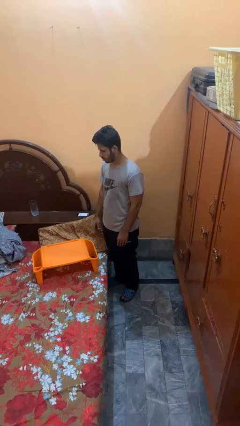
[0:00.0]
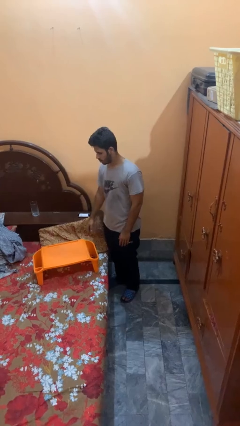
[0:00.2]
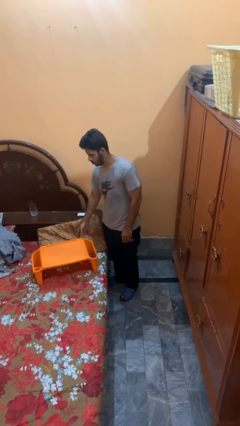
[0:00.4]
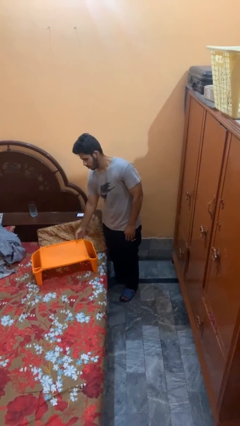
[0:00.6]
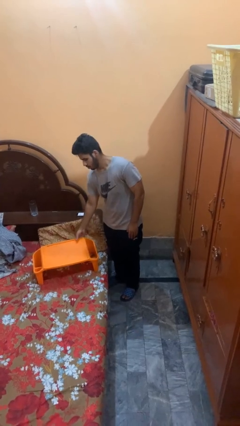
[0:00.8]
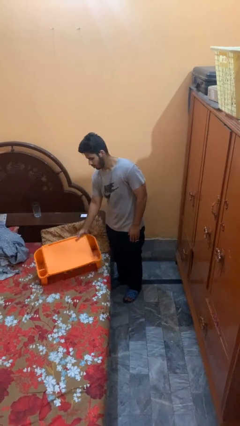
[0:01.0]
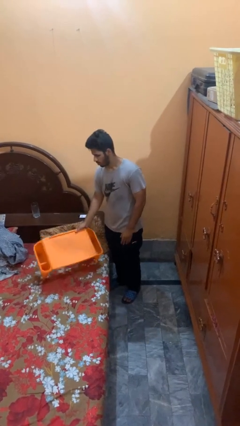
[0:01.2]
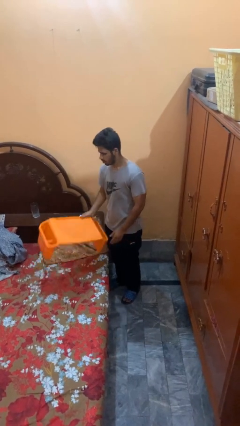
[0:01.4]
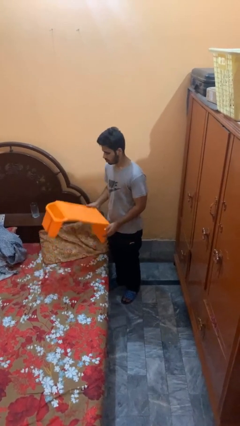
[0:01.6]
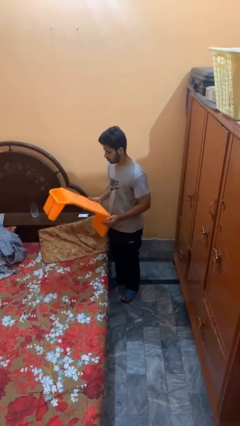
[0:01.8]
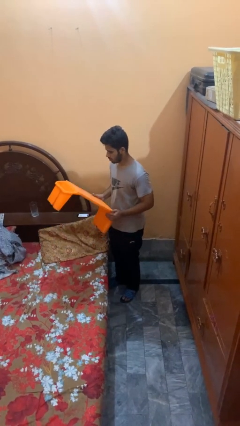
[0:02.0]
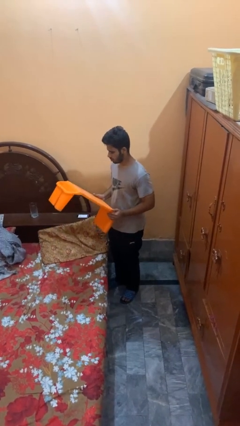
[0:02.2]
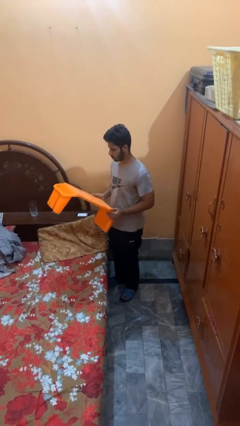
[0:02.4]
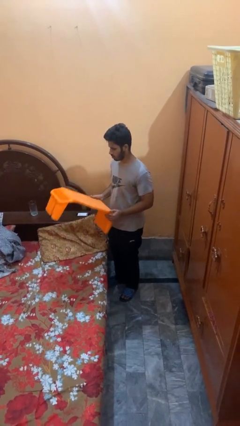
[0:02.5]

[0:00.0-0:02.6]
person picks up object from bed

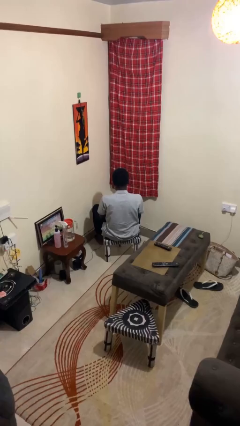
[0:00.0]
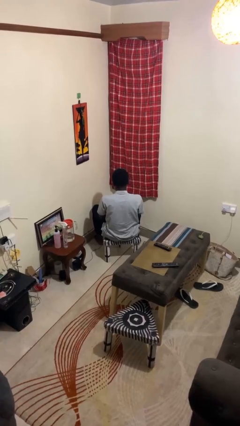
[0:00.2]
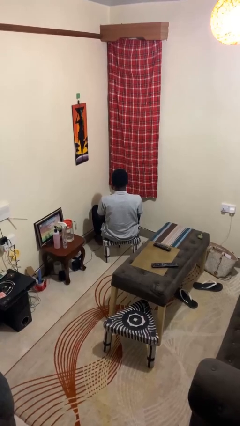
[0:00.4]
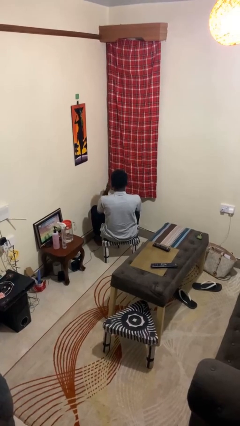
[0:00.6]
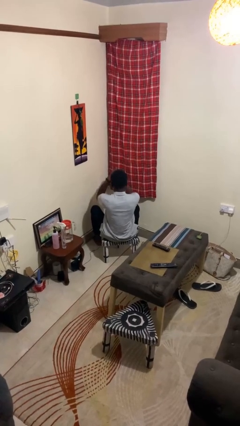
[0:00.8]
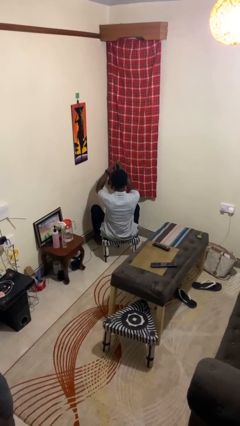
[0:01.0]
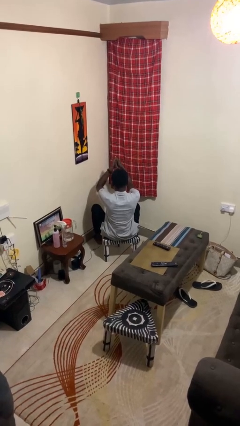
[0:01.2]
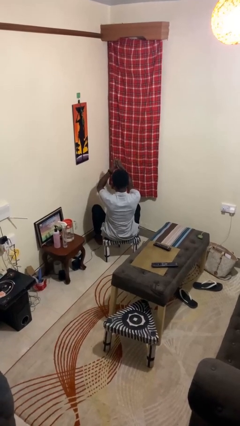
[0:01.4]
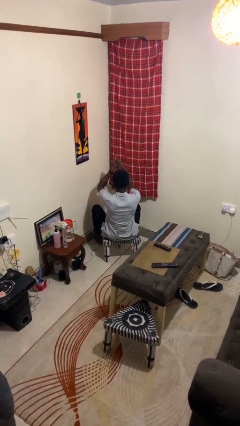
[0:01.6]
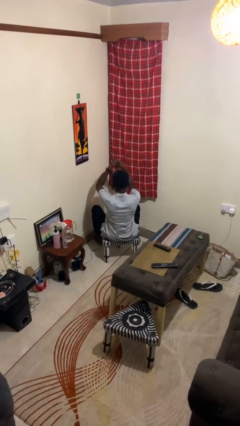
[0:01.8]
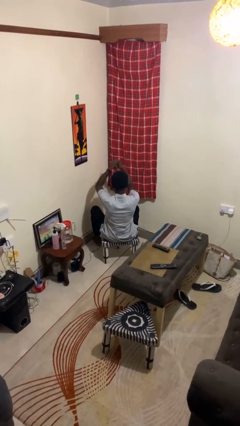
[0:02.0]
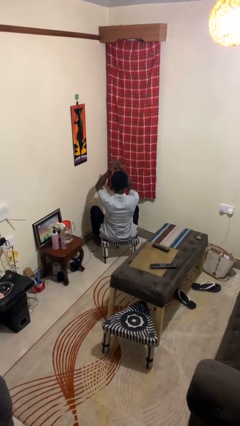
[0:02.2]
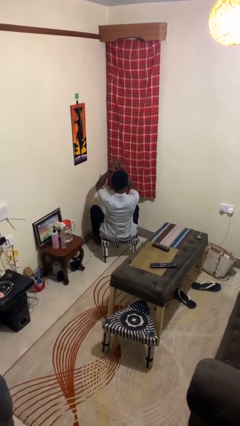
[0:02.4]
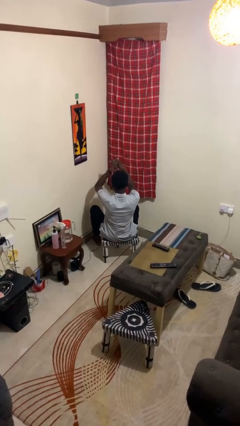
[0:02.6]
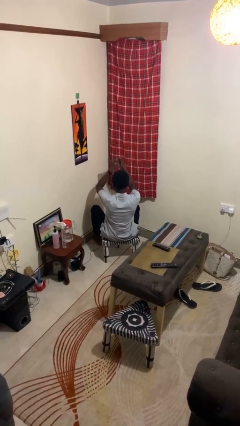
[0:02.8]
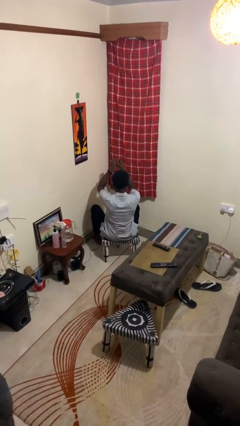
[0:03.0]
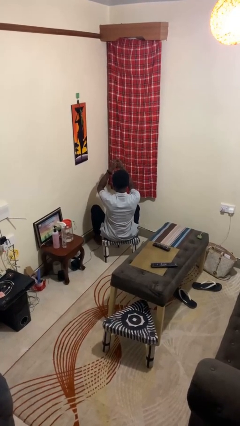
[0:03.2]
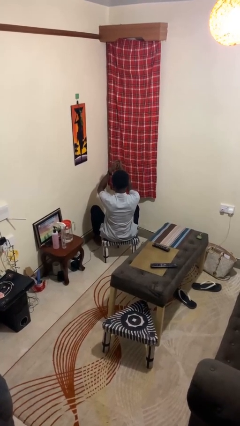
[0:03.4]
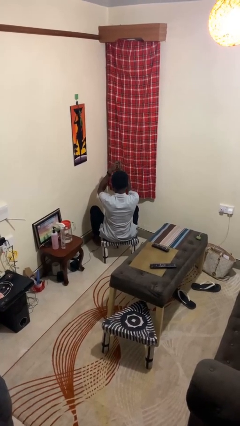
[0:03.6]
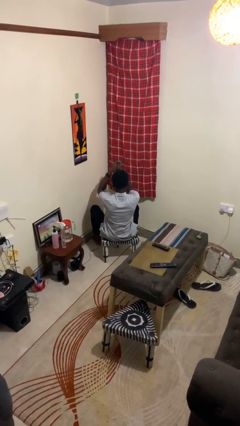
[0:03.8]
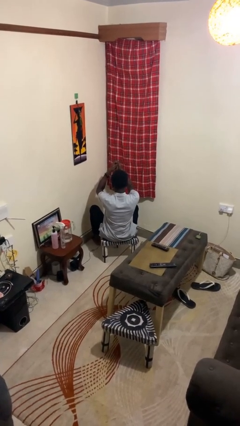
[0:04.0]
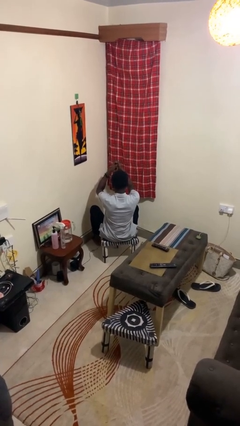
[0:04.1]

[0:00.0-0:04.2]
person cracks knuckles

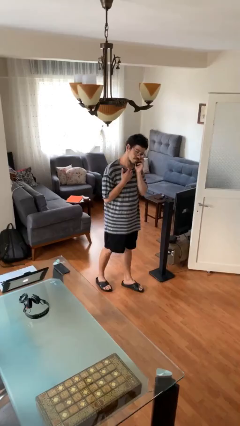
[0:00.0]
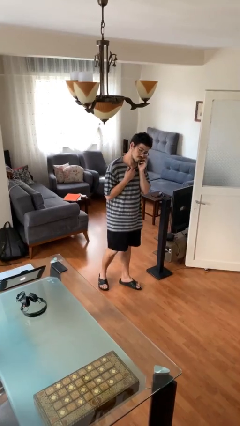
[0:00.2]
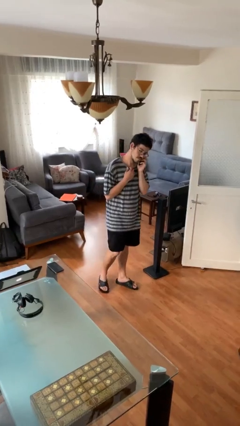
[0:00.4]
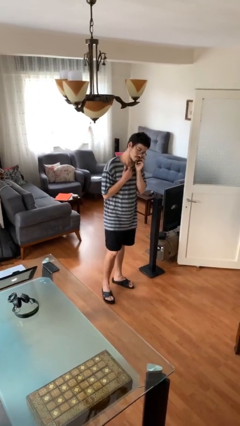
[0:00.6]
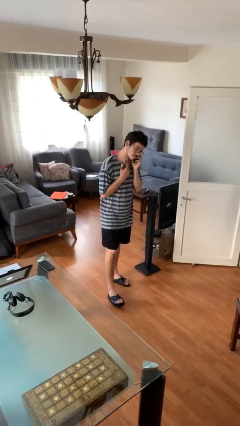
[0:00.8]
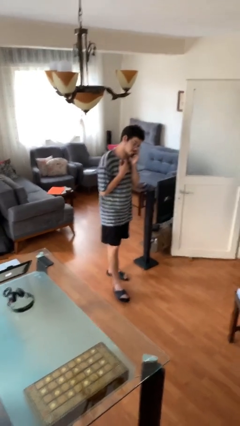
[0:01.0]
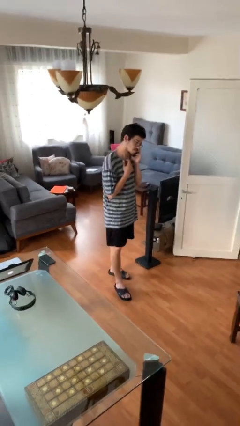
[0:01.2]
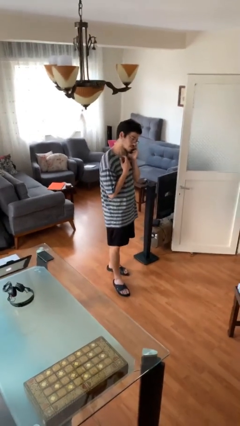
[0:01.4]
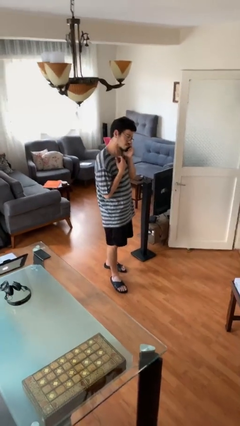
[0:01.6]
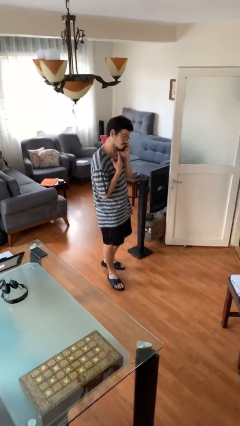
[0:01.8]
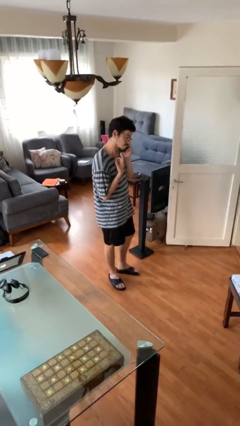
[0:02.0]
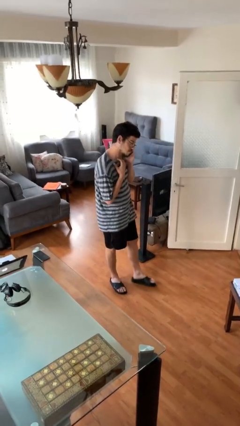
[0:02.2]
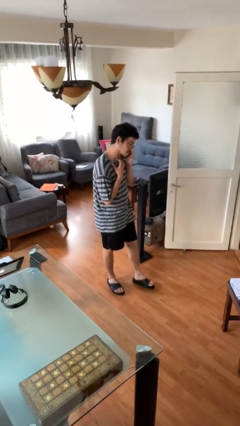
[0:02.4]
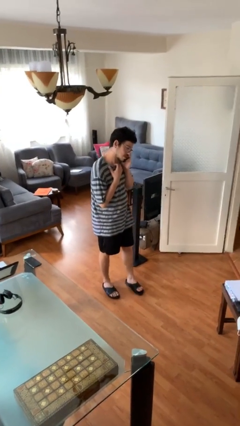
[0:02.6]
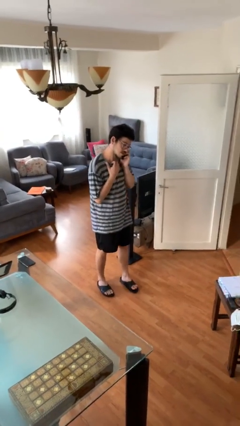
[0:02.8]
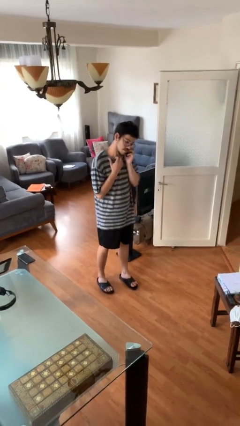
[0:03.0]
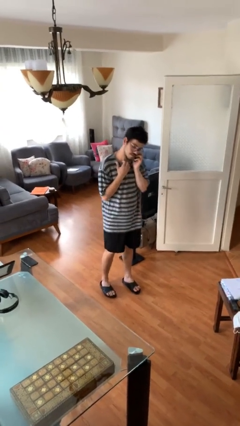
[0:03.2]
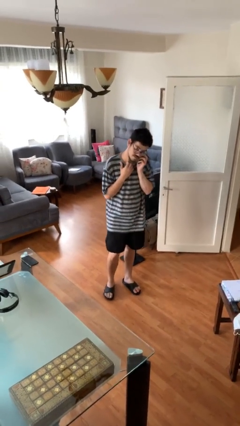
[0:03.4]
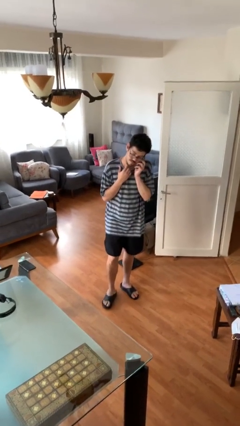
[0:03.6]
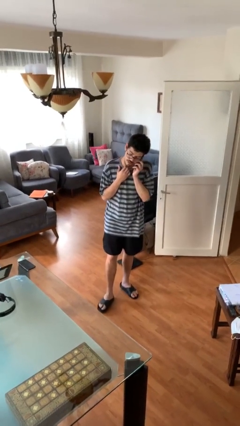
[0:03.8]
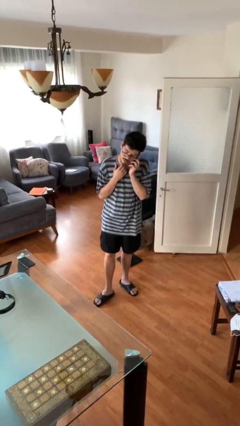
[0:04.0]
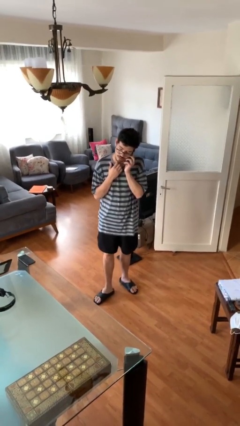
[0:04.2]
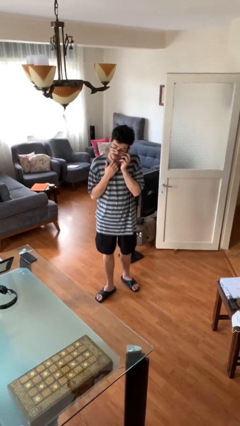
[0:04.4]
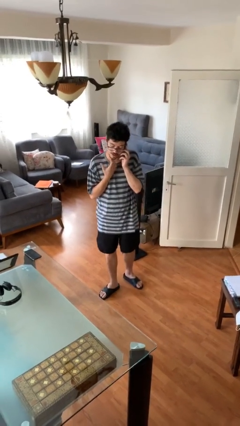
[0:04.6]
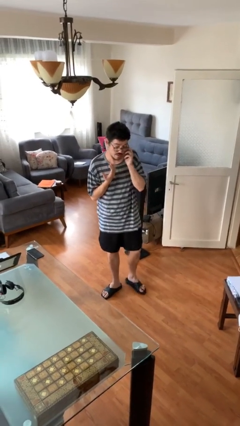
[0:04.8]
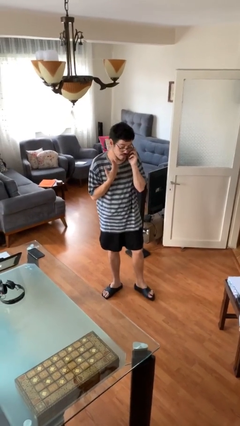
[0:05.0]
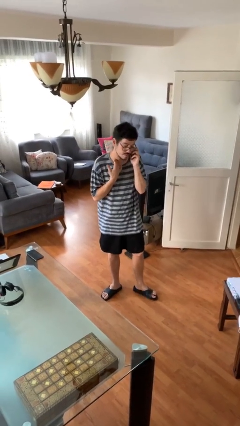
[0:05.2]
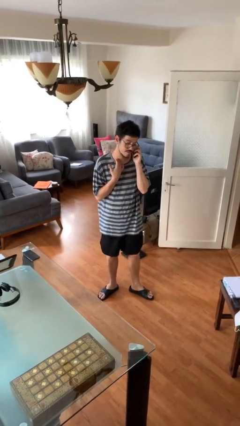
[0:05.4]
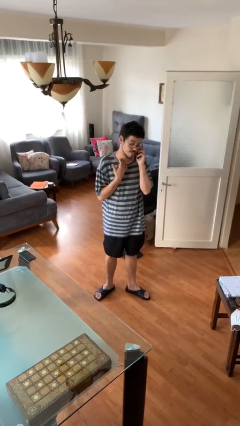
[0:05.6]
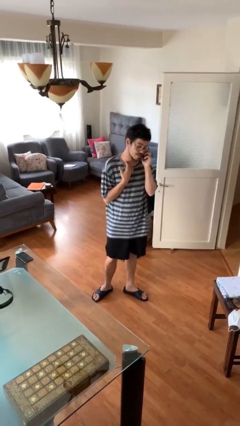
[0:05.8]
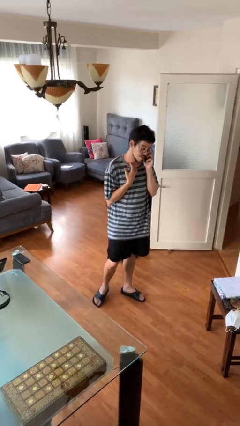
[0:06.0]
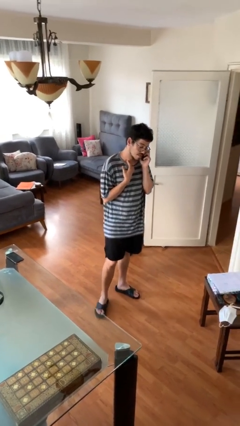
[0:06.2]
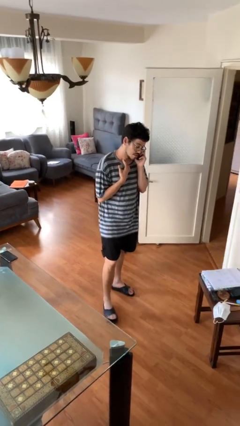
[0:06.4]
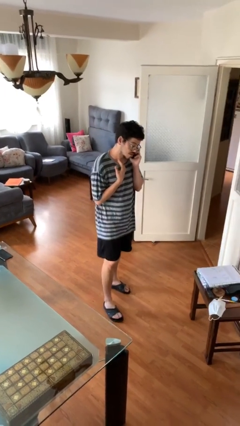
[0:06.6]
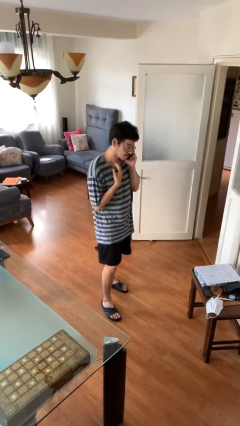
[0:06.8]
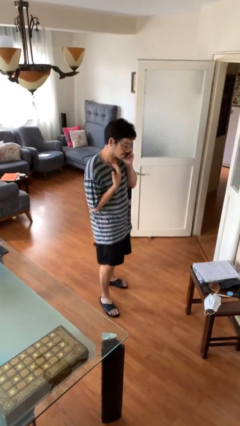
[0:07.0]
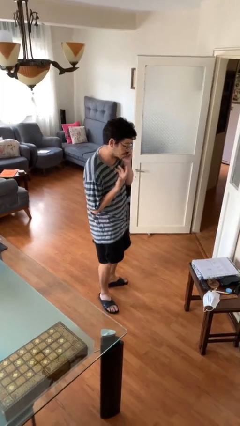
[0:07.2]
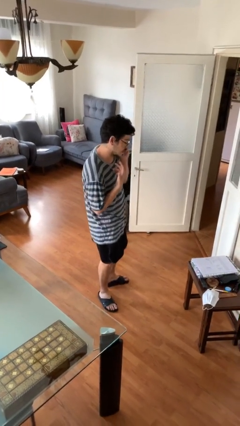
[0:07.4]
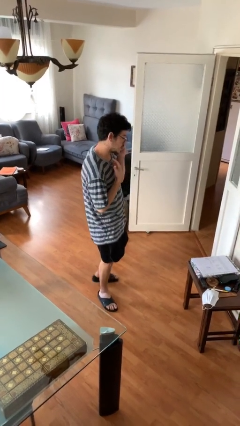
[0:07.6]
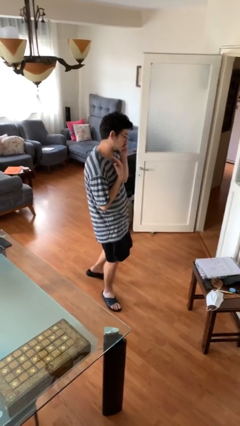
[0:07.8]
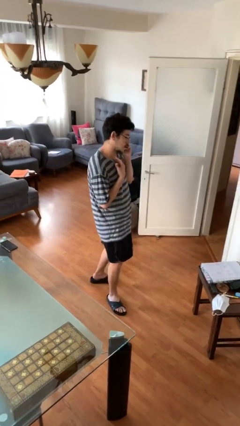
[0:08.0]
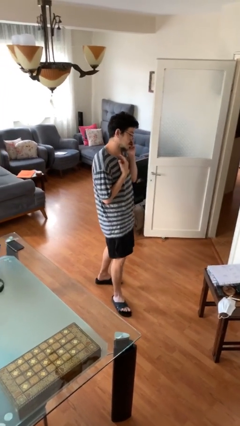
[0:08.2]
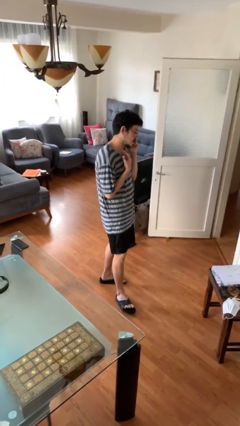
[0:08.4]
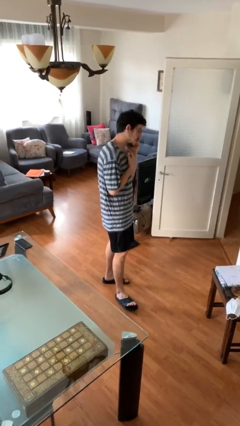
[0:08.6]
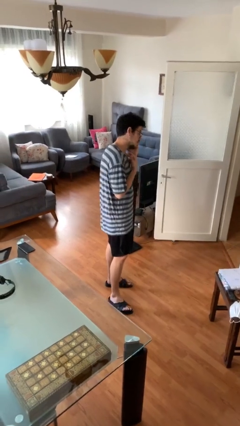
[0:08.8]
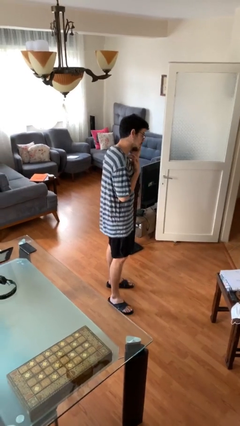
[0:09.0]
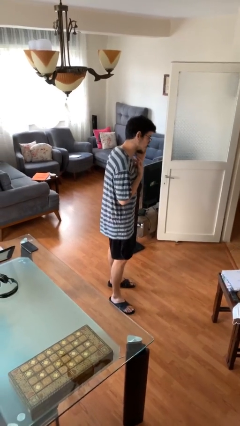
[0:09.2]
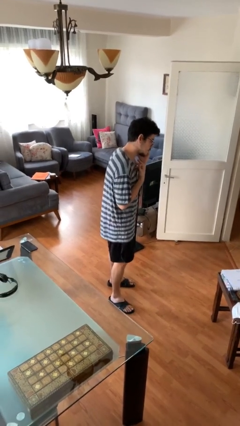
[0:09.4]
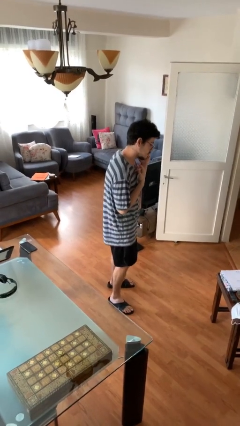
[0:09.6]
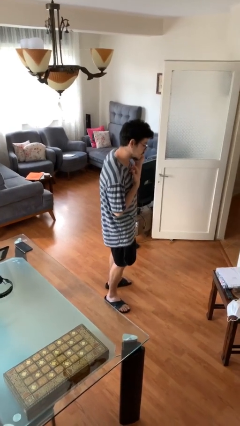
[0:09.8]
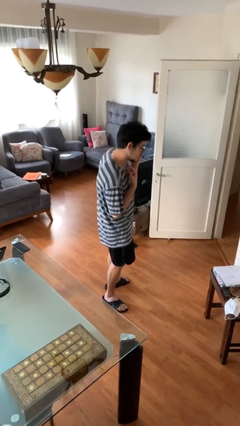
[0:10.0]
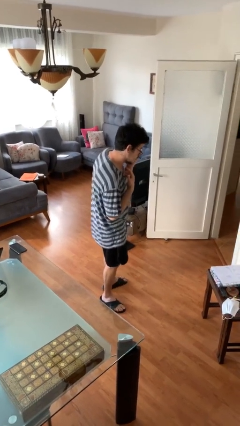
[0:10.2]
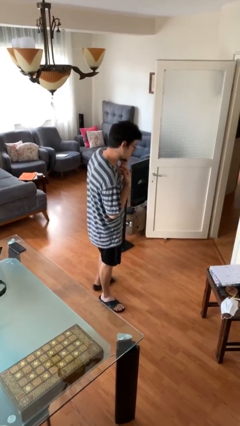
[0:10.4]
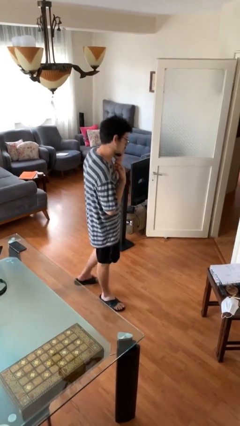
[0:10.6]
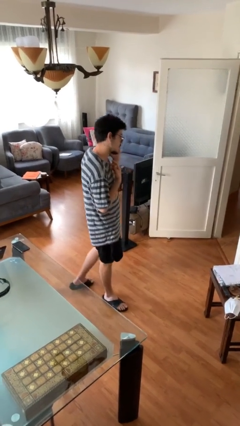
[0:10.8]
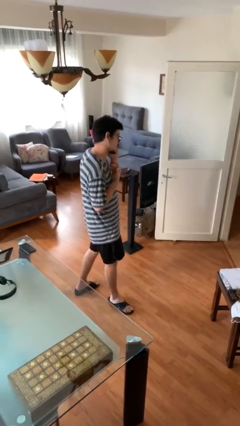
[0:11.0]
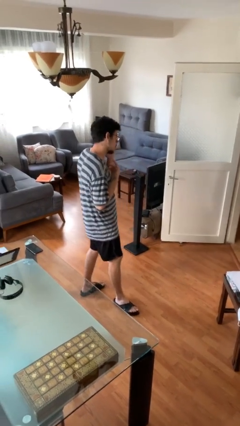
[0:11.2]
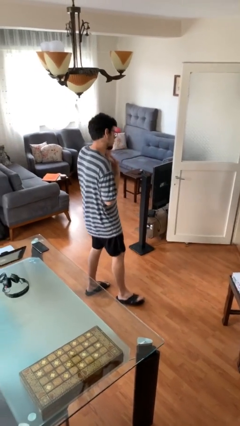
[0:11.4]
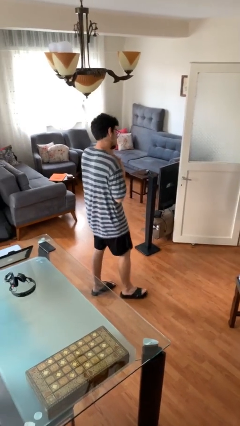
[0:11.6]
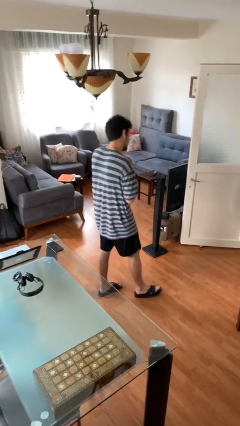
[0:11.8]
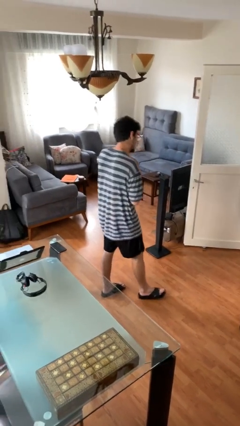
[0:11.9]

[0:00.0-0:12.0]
person talks on phone
